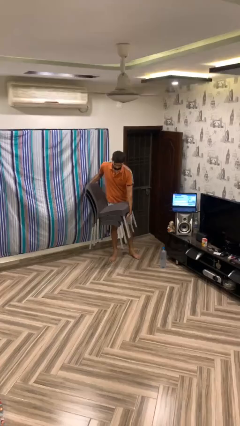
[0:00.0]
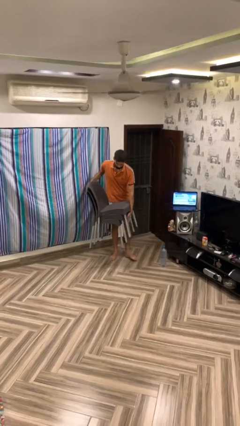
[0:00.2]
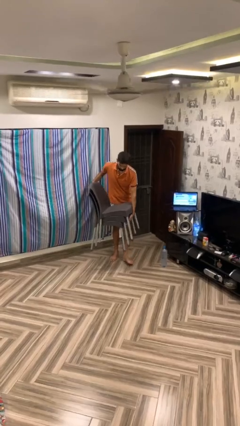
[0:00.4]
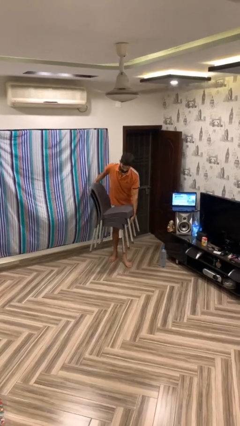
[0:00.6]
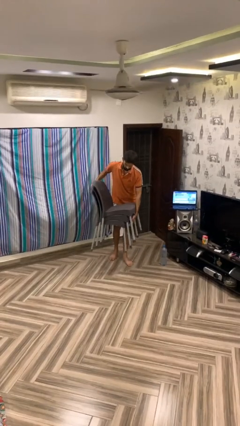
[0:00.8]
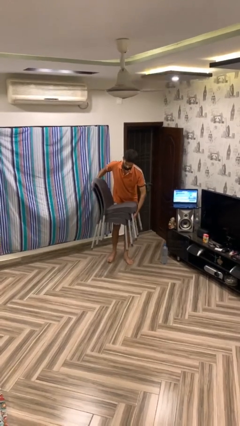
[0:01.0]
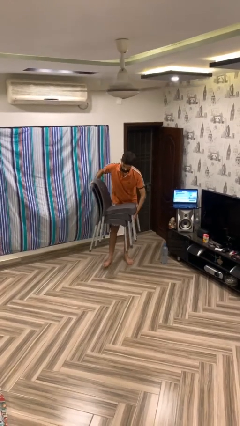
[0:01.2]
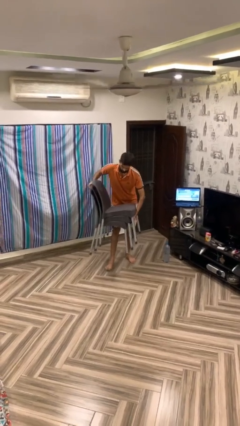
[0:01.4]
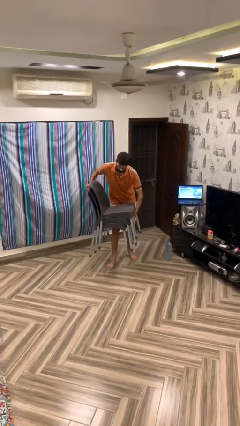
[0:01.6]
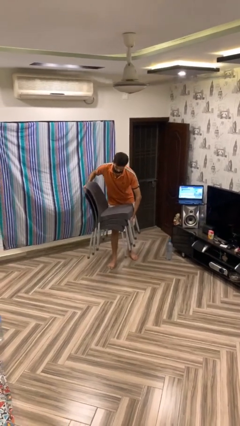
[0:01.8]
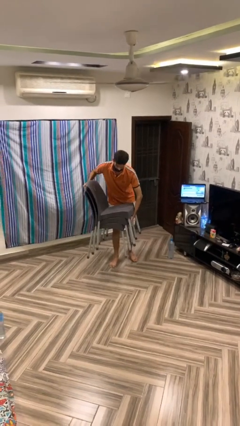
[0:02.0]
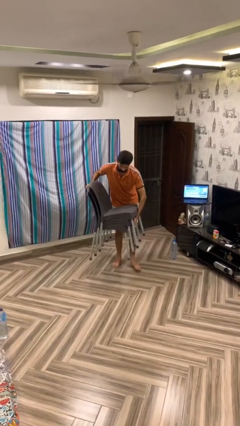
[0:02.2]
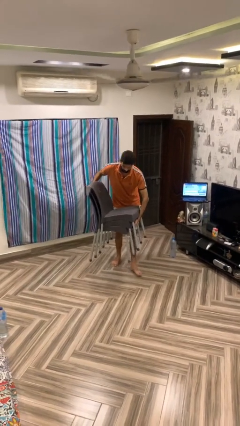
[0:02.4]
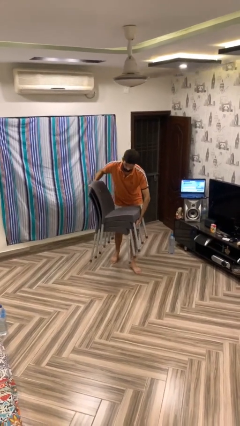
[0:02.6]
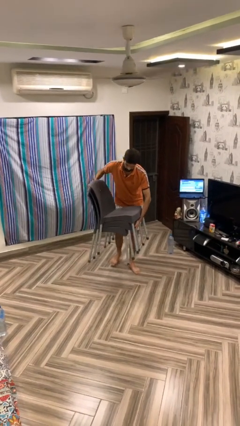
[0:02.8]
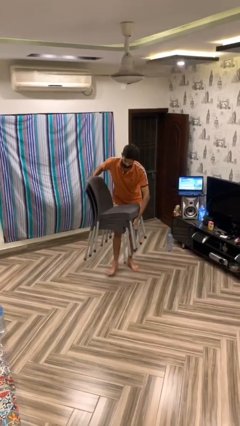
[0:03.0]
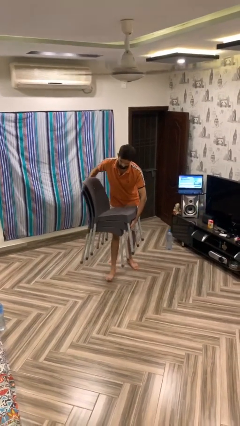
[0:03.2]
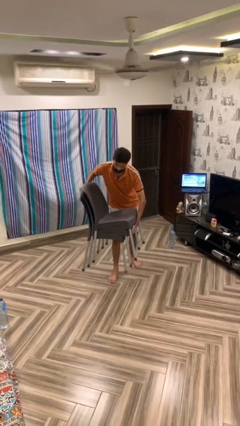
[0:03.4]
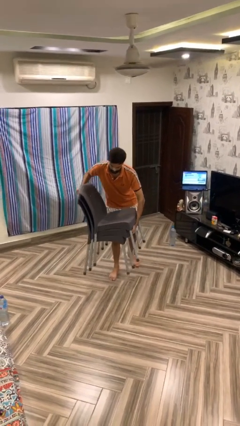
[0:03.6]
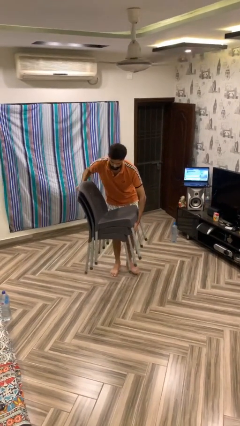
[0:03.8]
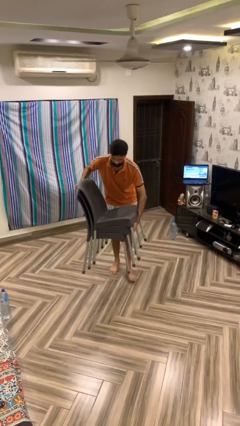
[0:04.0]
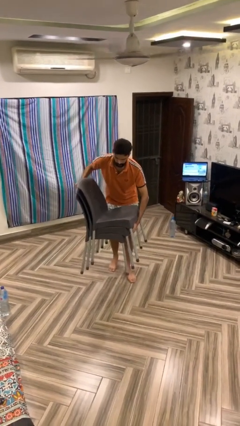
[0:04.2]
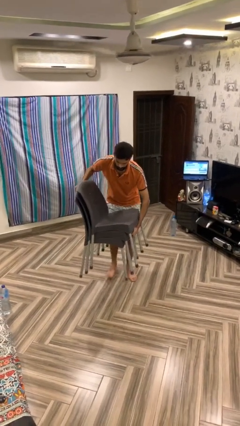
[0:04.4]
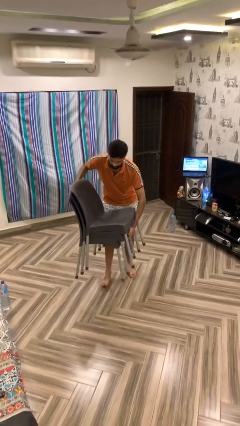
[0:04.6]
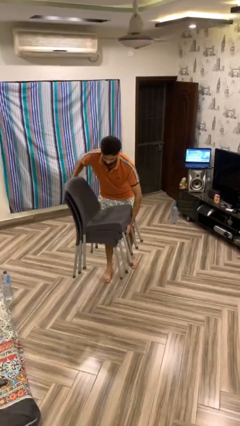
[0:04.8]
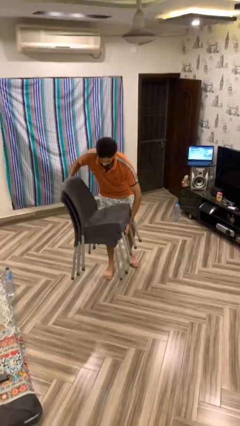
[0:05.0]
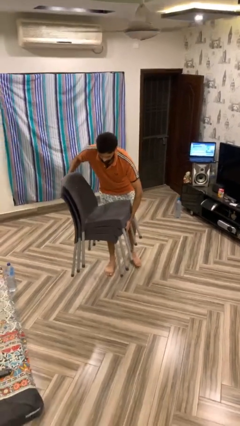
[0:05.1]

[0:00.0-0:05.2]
person carries heavy object

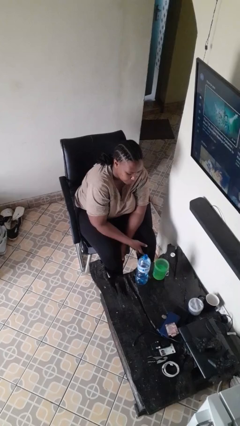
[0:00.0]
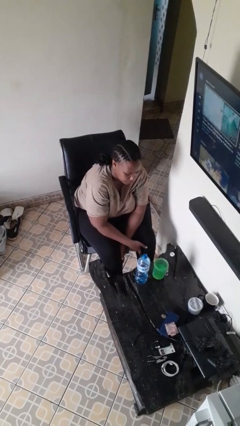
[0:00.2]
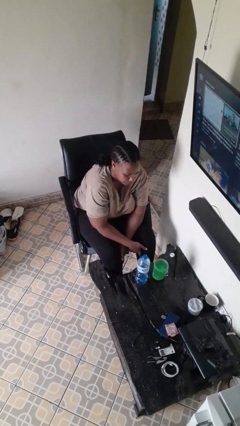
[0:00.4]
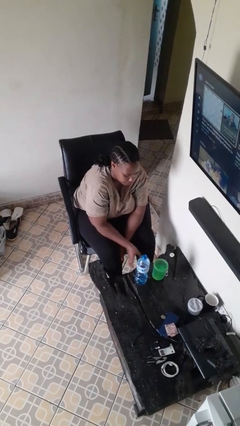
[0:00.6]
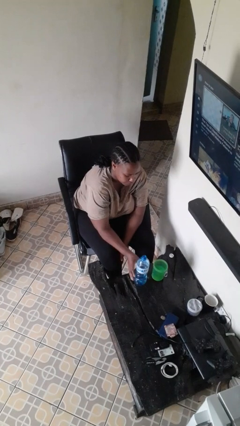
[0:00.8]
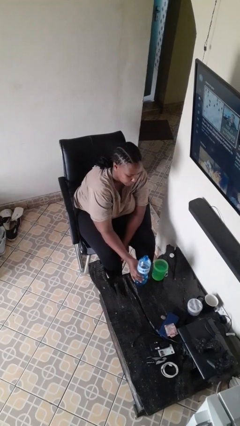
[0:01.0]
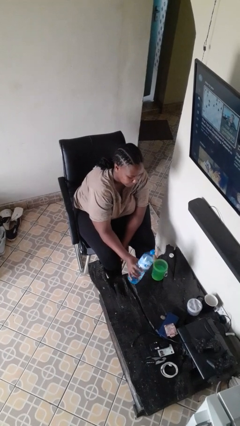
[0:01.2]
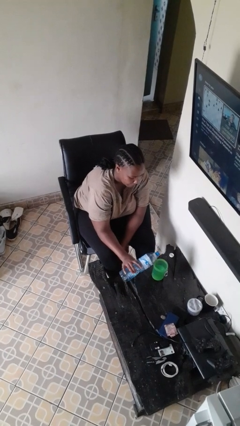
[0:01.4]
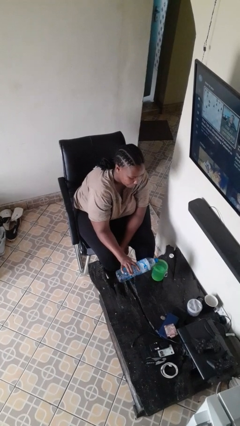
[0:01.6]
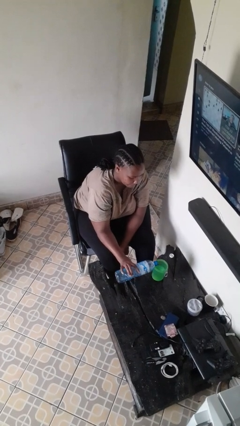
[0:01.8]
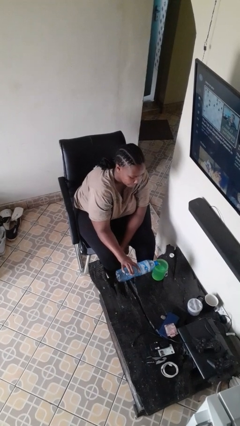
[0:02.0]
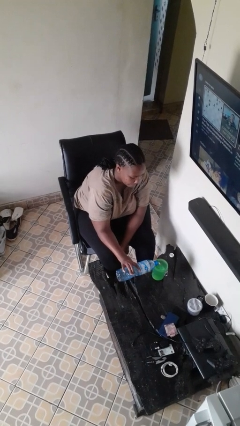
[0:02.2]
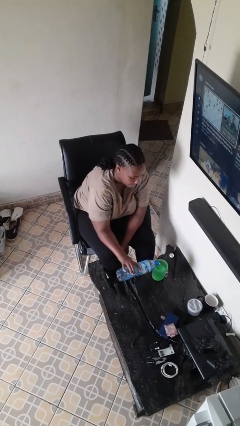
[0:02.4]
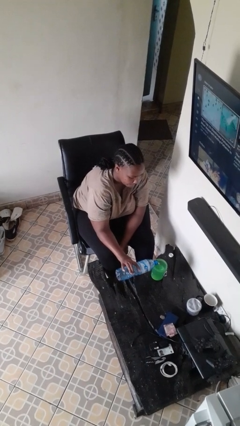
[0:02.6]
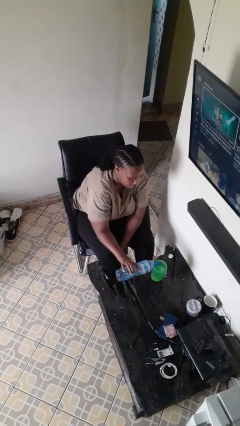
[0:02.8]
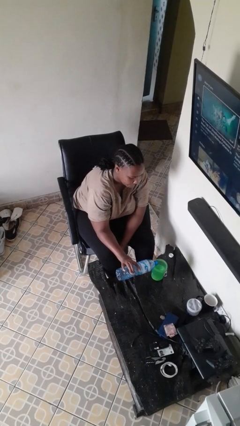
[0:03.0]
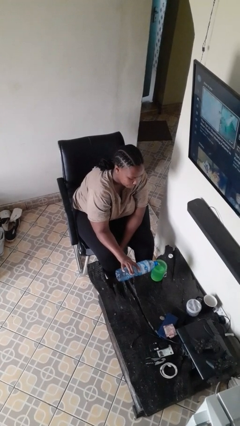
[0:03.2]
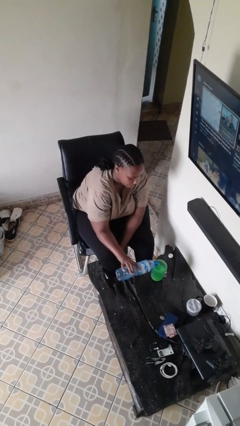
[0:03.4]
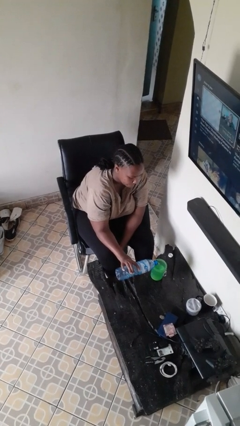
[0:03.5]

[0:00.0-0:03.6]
person pours liquid into cup

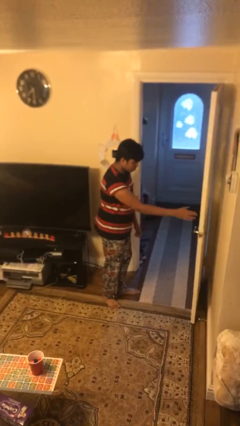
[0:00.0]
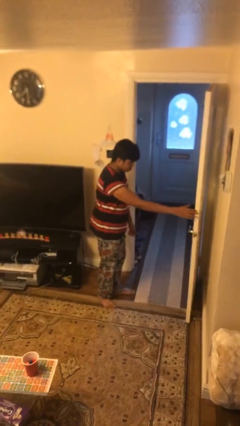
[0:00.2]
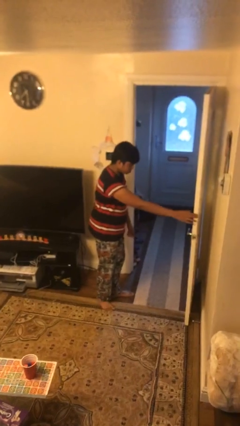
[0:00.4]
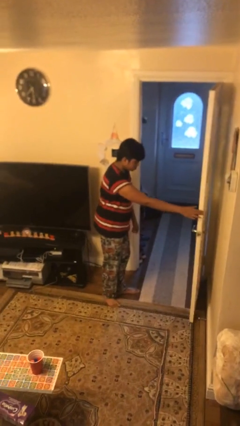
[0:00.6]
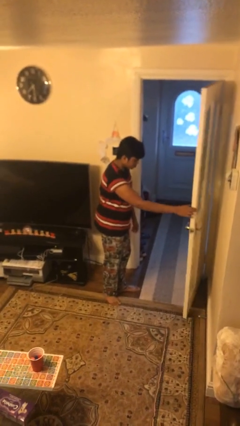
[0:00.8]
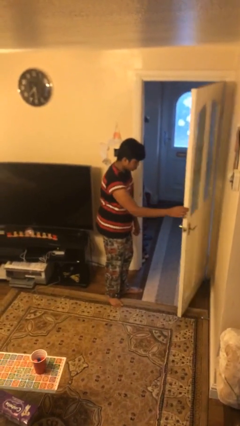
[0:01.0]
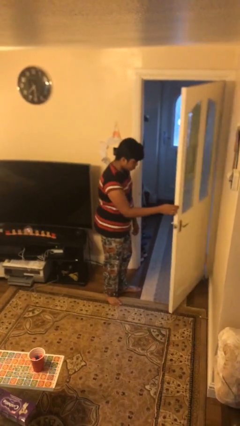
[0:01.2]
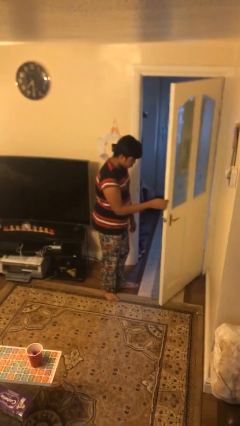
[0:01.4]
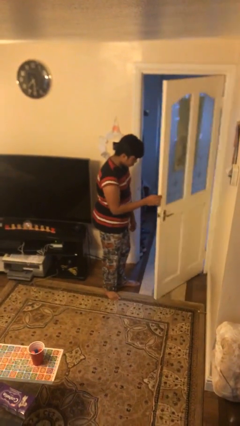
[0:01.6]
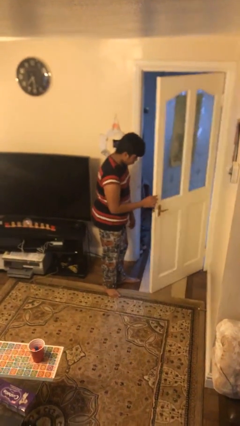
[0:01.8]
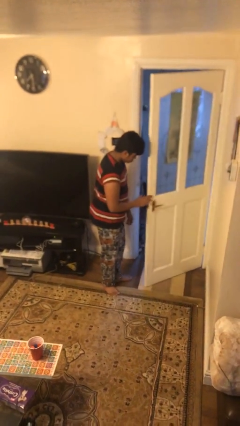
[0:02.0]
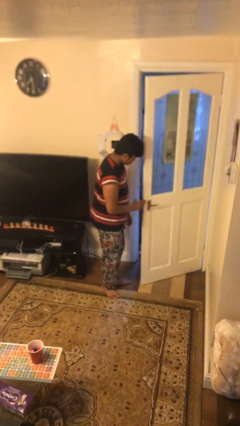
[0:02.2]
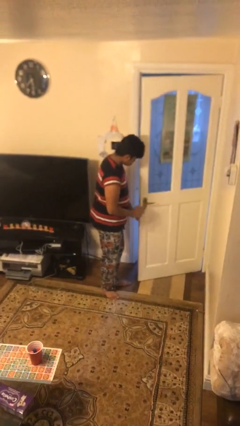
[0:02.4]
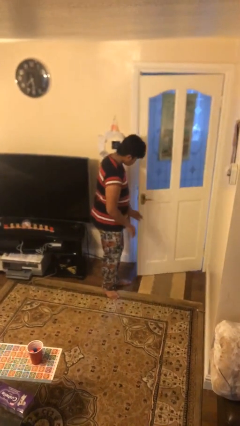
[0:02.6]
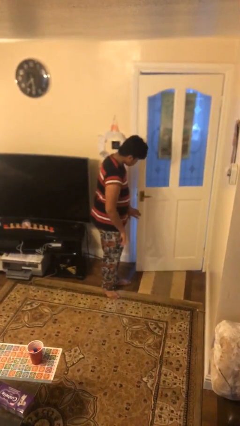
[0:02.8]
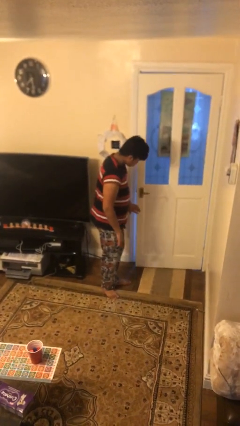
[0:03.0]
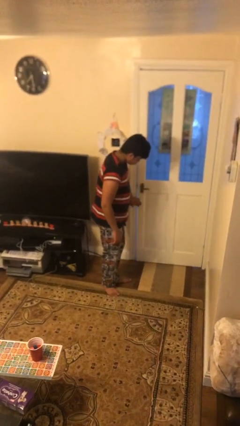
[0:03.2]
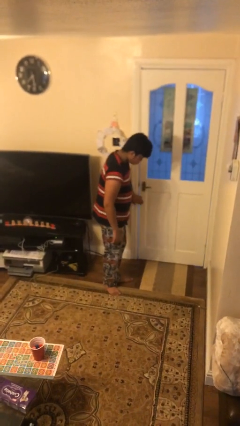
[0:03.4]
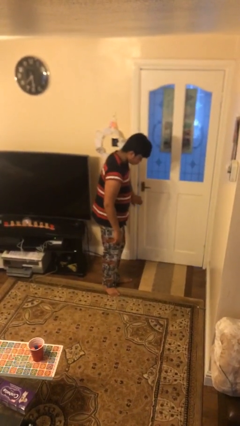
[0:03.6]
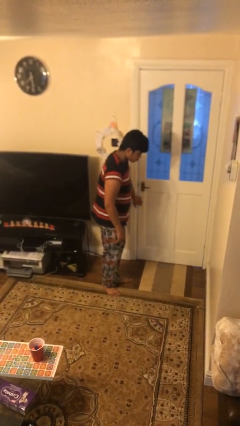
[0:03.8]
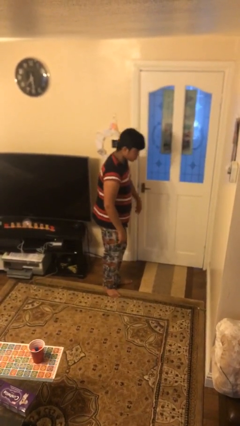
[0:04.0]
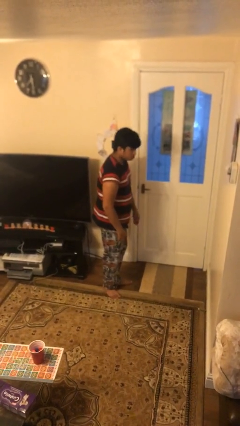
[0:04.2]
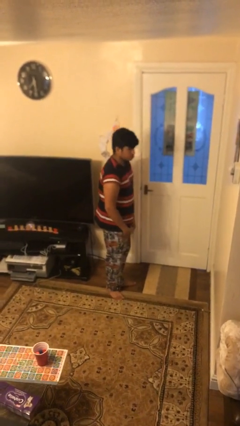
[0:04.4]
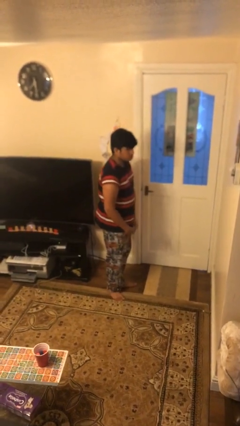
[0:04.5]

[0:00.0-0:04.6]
person closes facility door

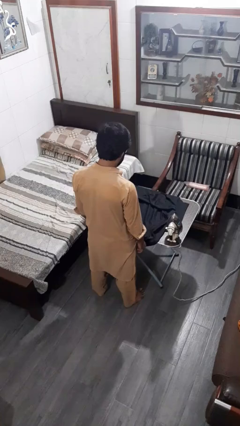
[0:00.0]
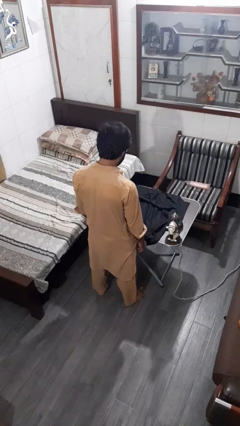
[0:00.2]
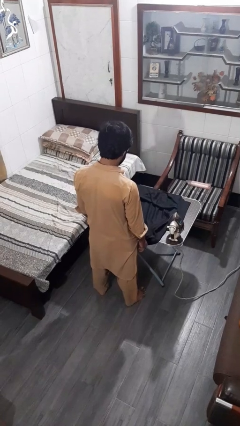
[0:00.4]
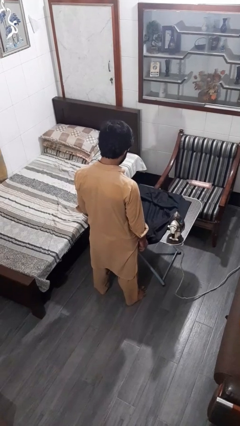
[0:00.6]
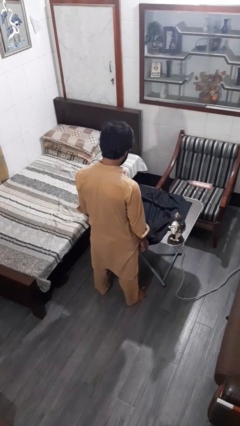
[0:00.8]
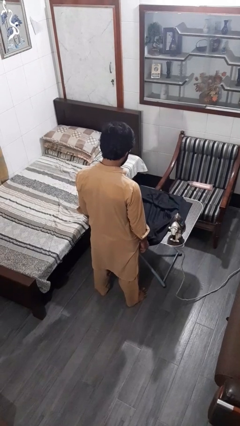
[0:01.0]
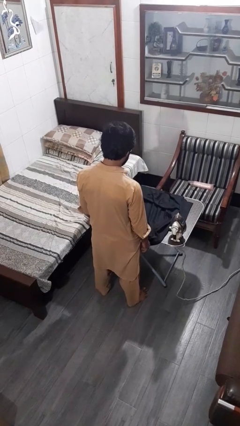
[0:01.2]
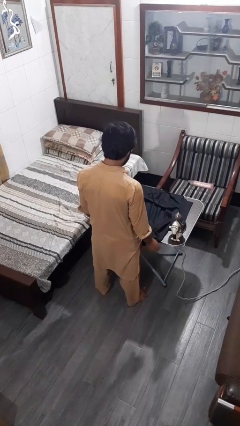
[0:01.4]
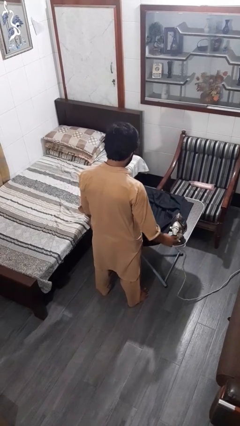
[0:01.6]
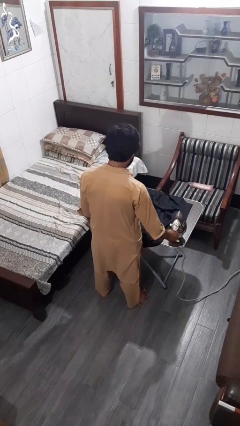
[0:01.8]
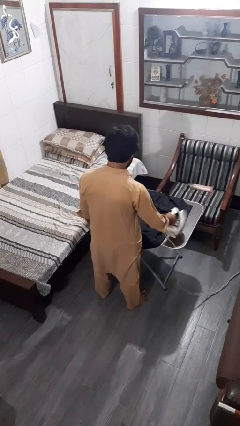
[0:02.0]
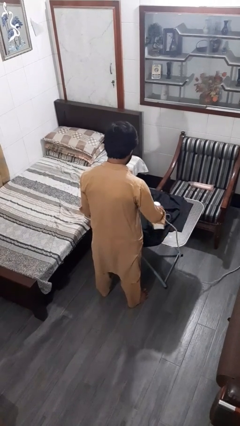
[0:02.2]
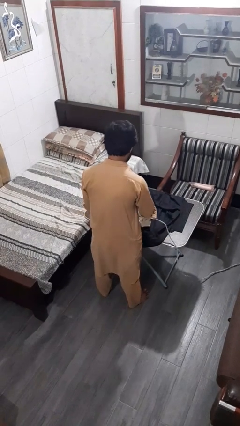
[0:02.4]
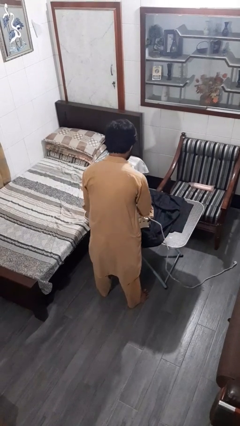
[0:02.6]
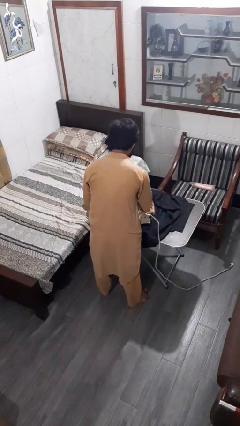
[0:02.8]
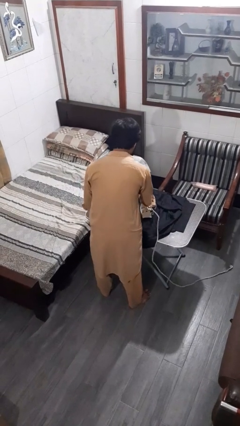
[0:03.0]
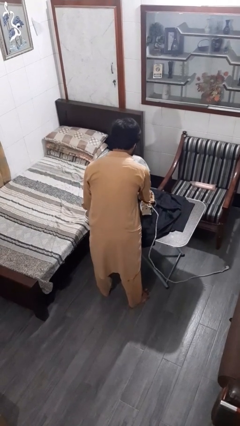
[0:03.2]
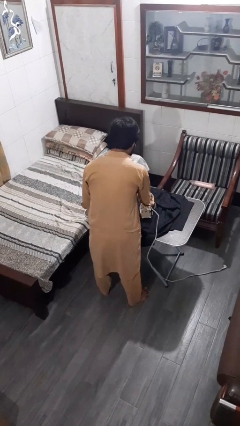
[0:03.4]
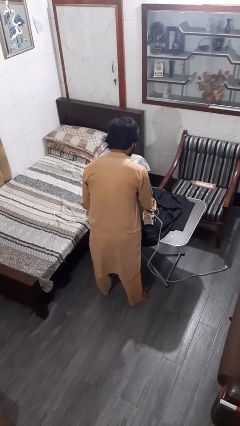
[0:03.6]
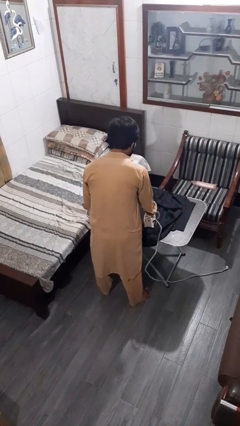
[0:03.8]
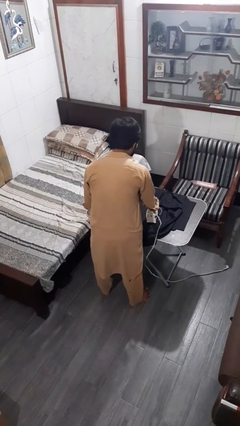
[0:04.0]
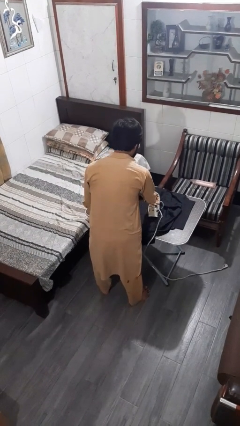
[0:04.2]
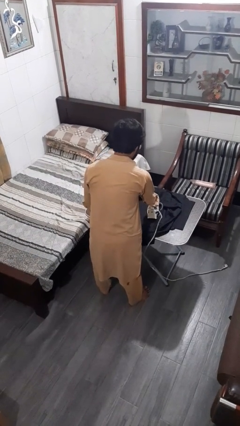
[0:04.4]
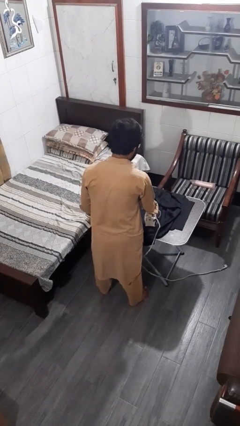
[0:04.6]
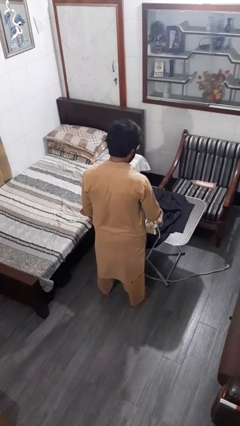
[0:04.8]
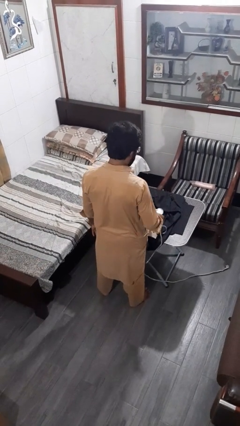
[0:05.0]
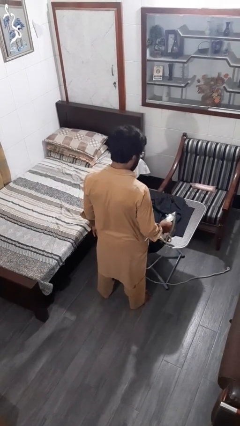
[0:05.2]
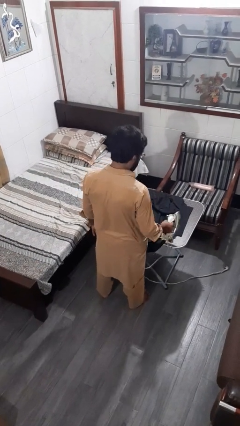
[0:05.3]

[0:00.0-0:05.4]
person irons clothes
